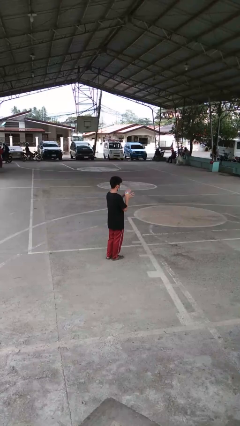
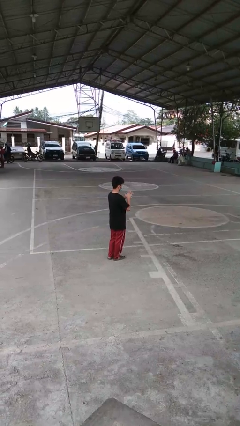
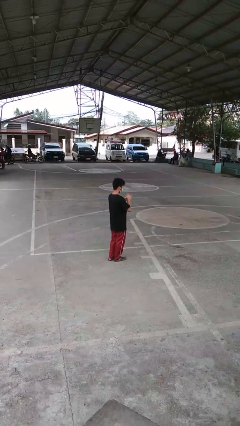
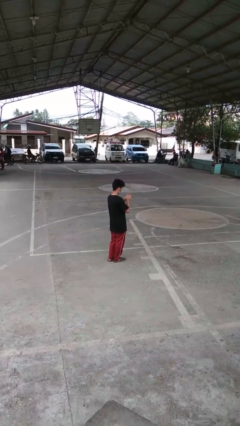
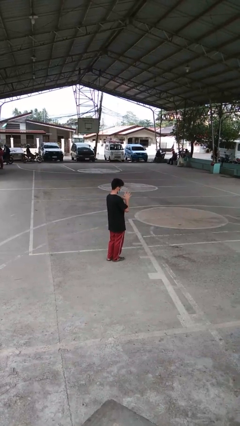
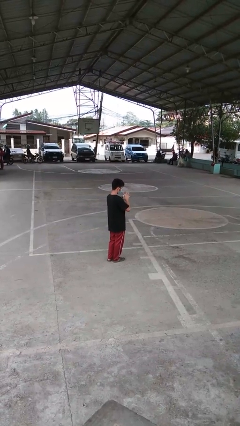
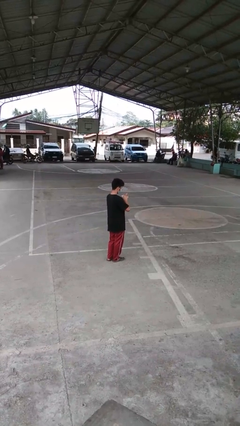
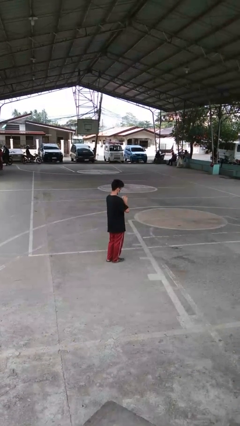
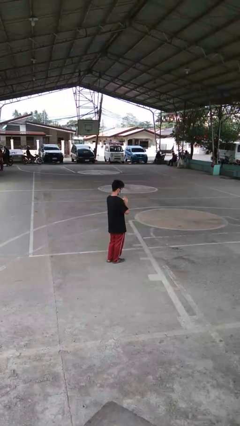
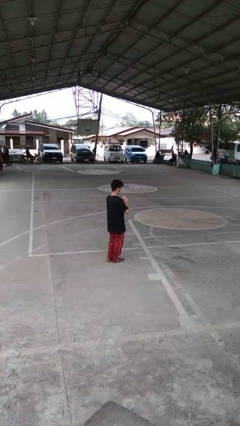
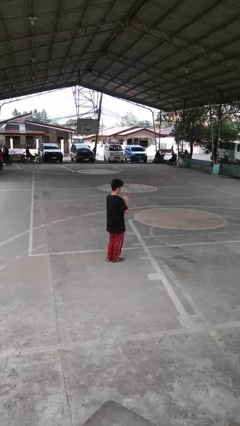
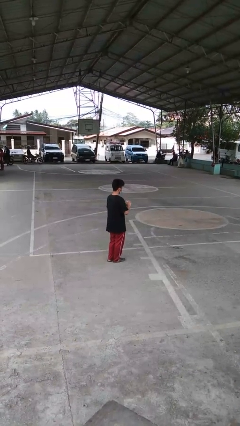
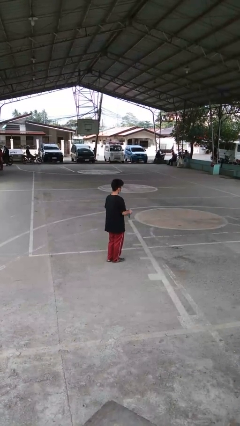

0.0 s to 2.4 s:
person squeezes object

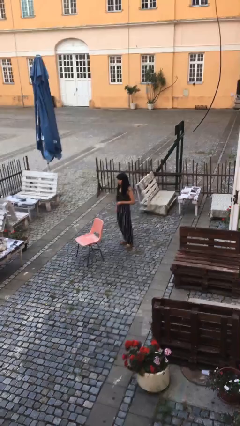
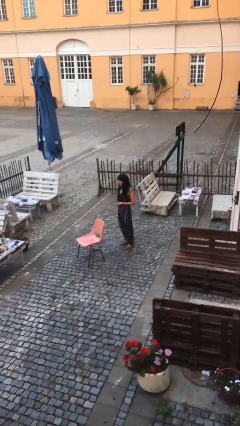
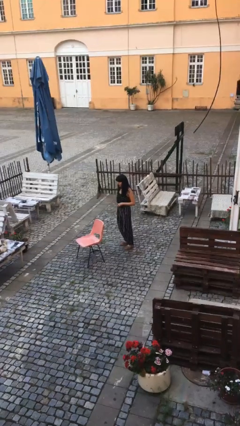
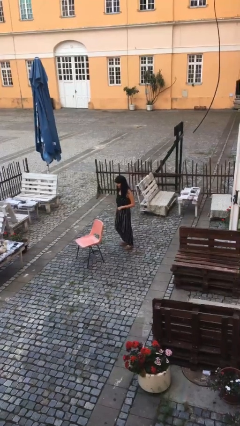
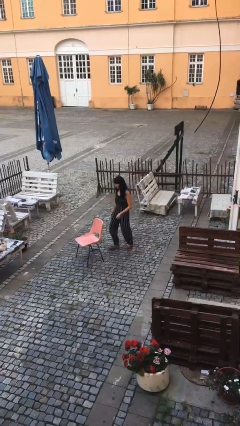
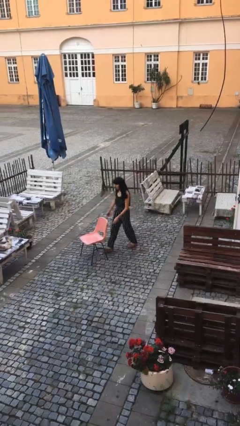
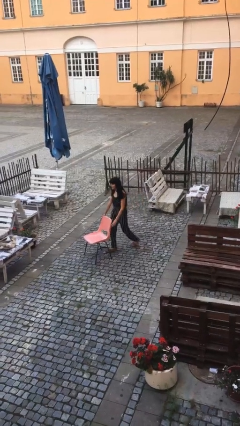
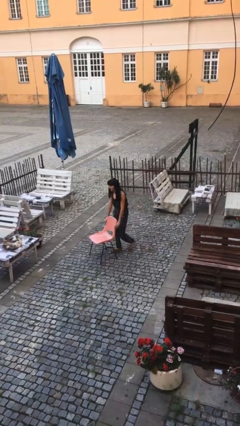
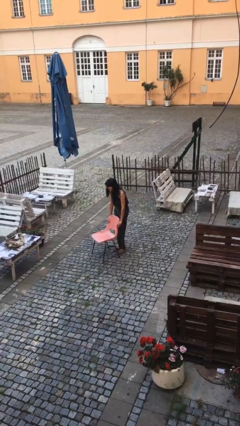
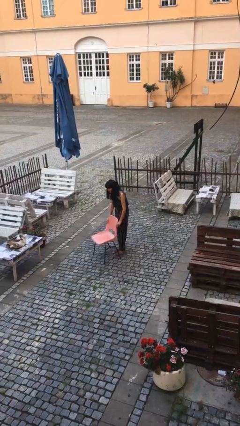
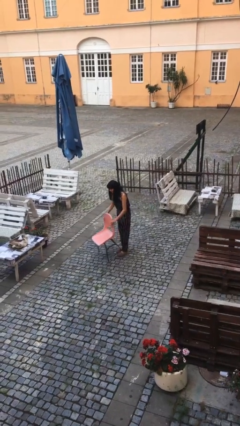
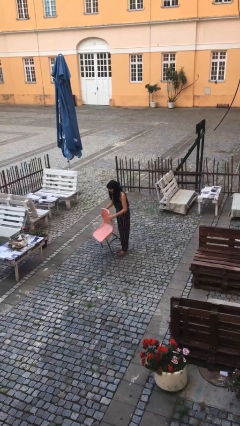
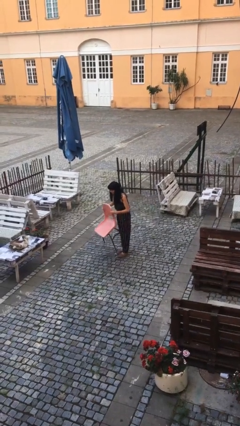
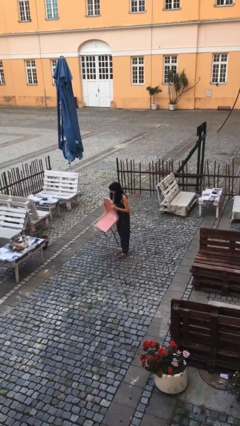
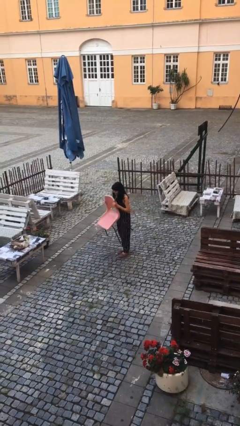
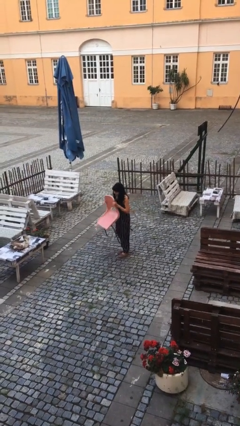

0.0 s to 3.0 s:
person picks up object from floor

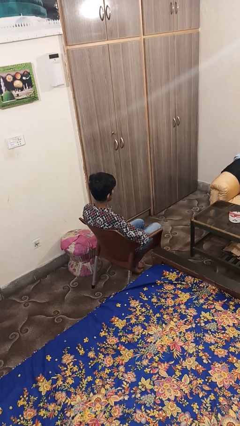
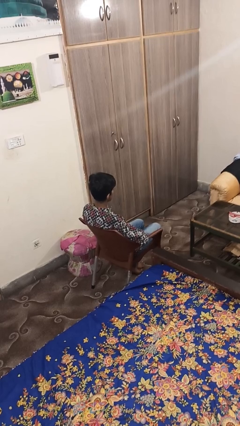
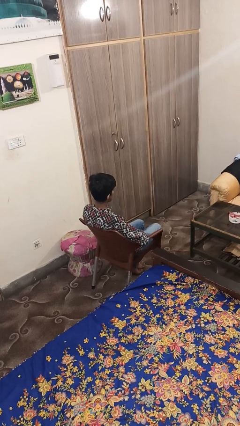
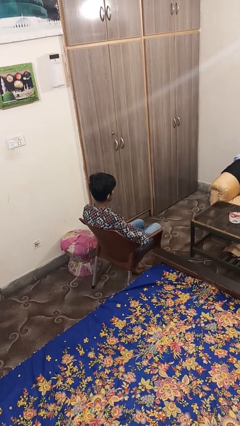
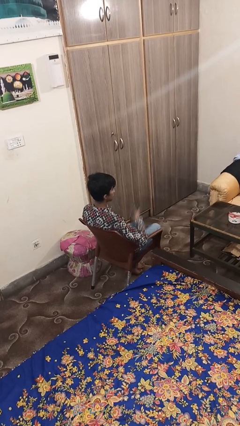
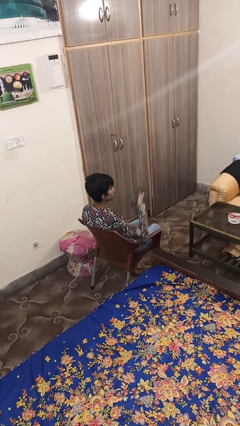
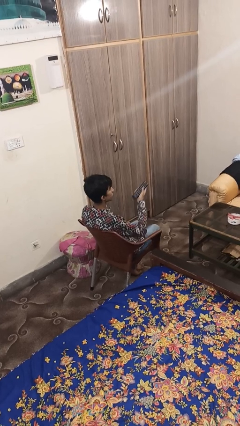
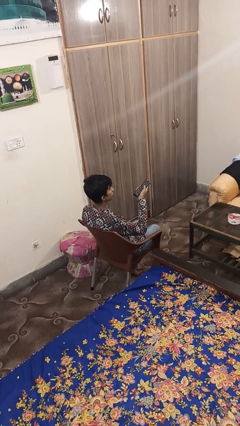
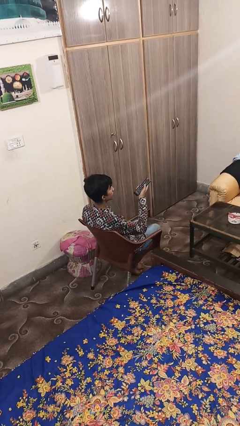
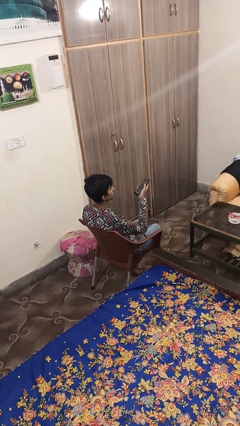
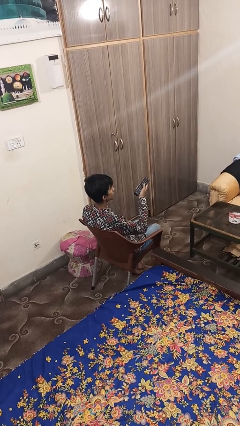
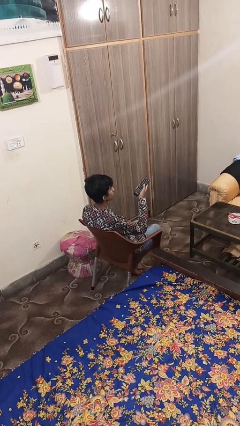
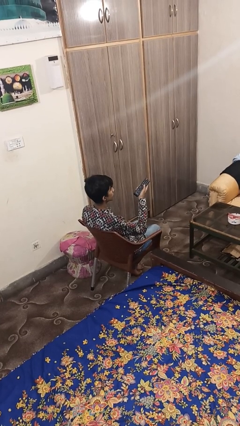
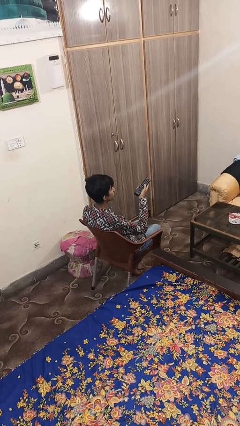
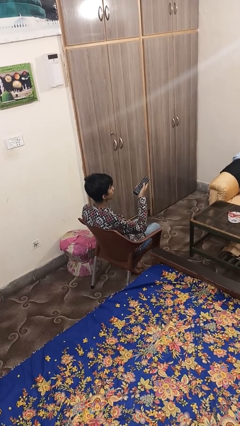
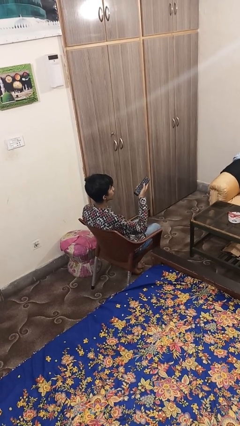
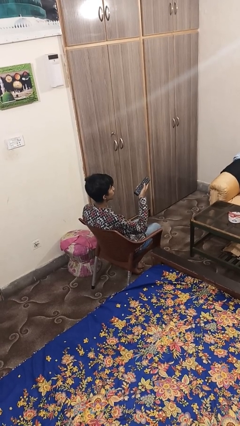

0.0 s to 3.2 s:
person uses television remote

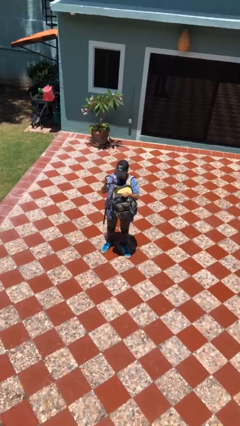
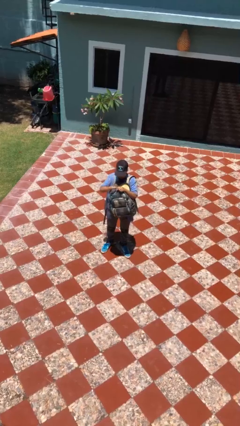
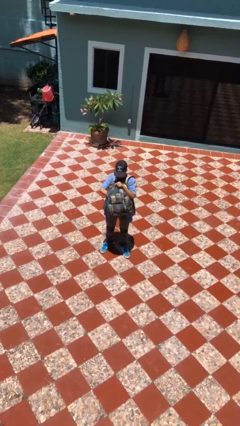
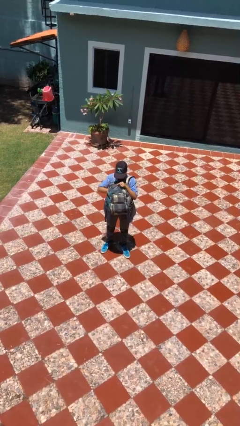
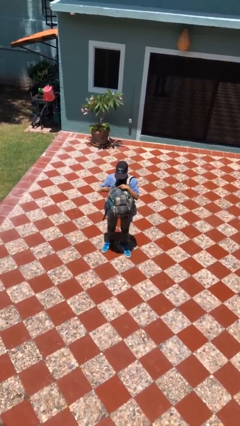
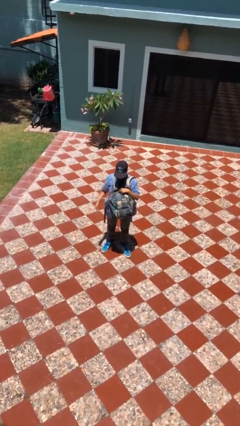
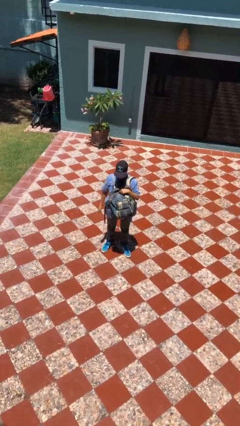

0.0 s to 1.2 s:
person puts object into backpack

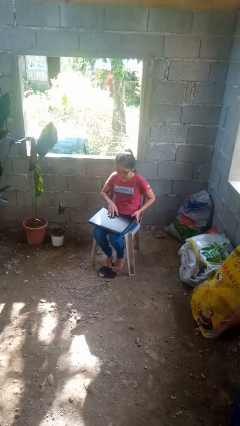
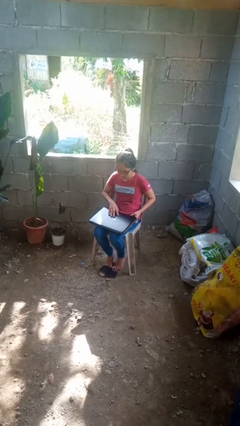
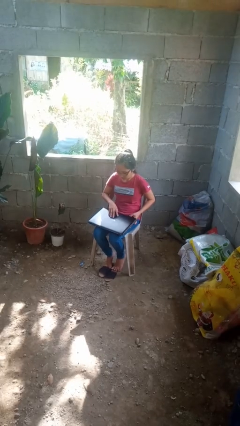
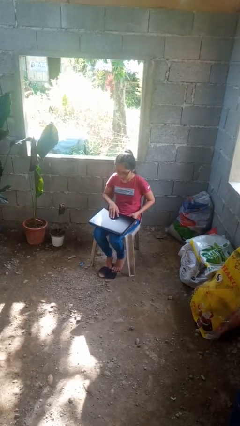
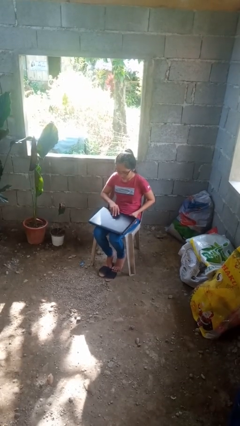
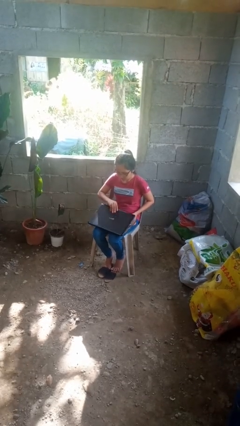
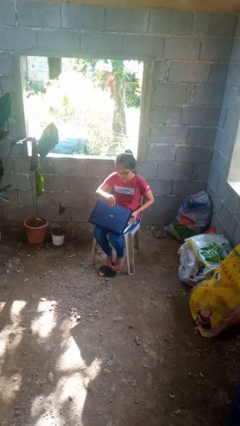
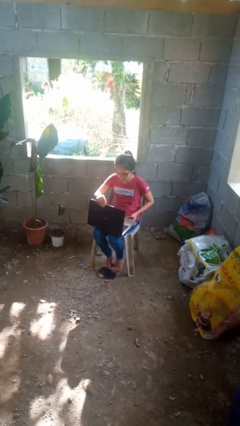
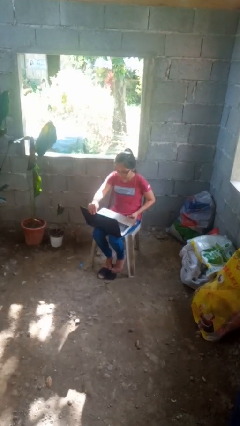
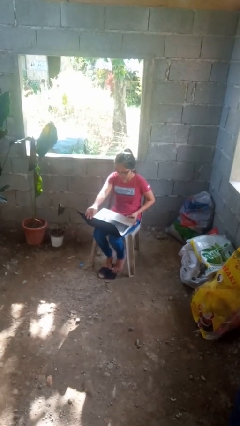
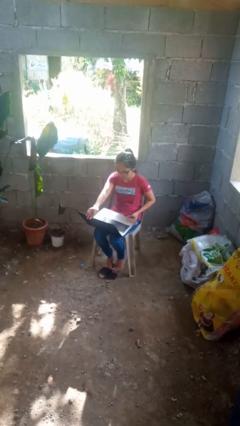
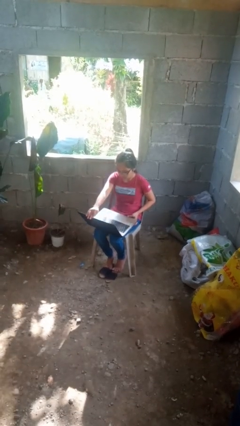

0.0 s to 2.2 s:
person opens laptop

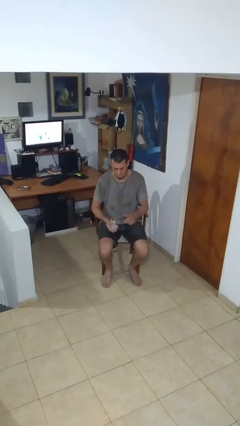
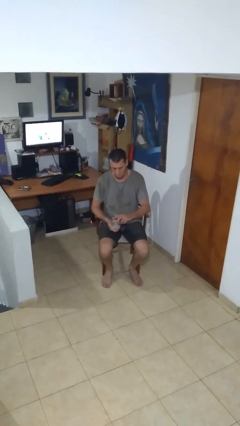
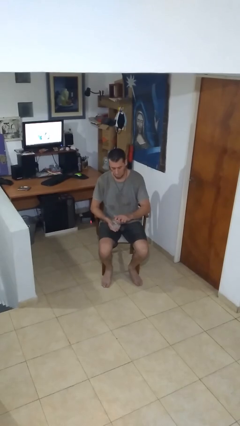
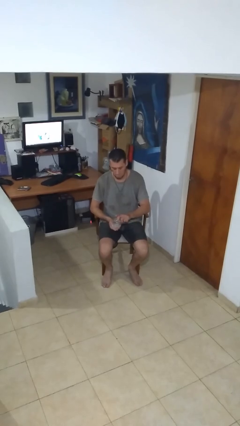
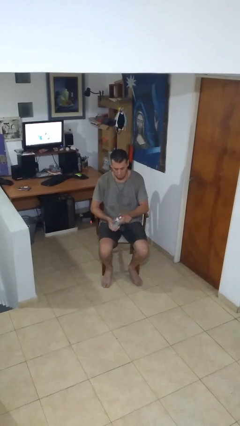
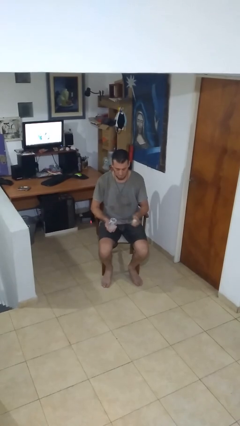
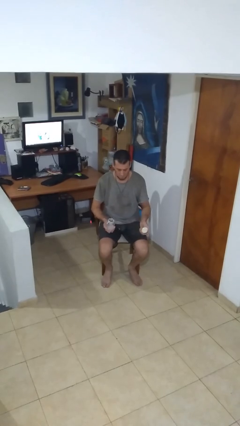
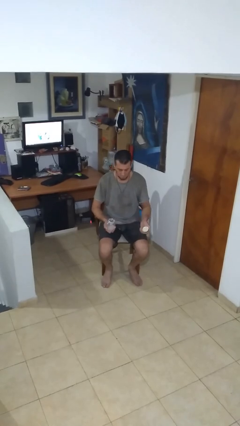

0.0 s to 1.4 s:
person opens jar

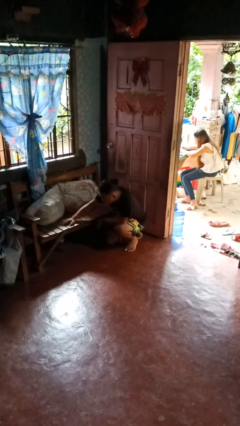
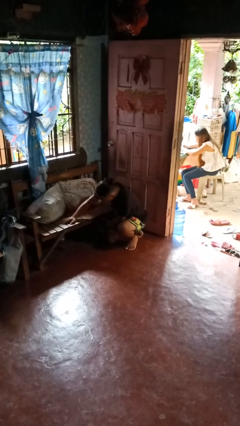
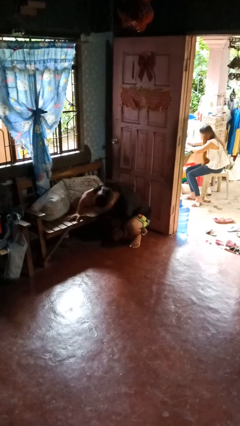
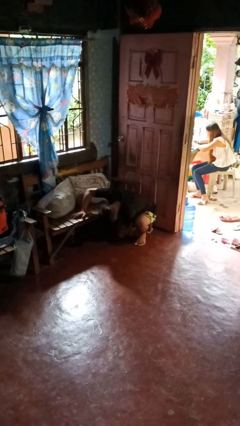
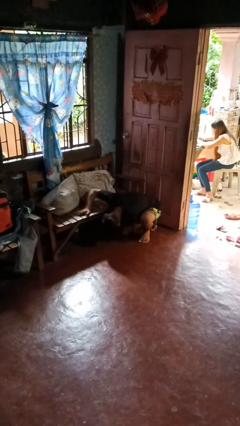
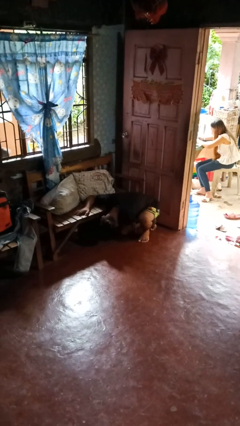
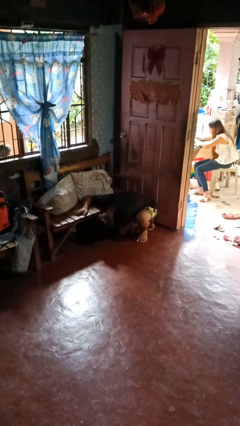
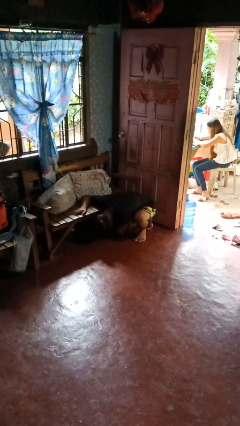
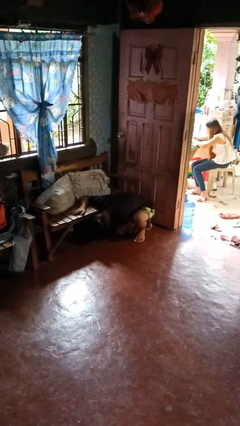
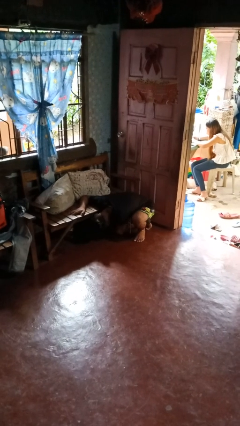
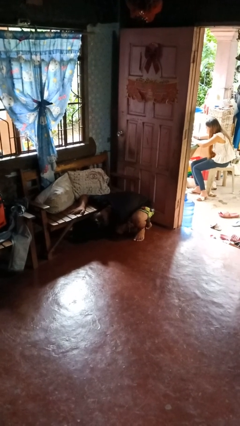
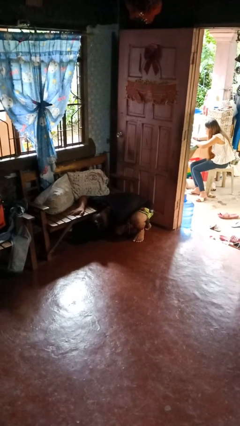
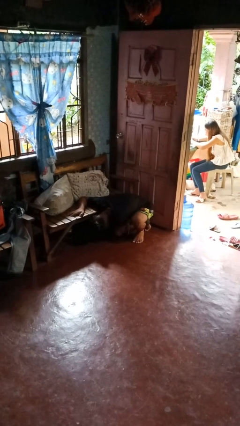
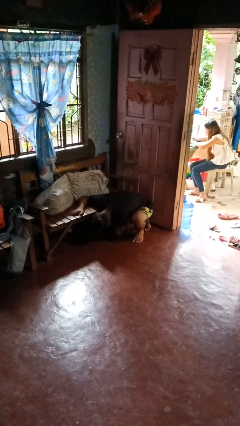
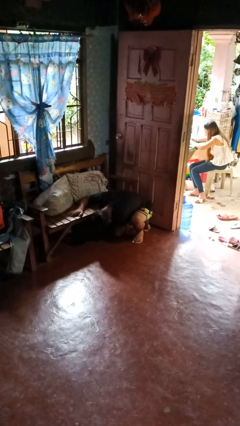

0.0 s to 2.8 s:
person searches under couch
